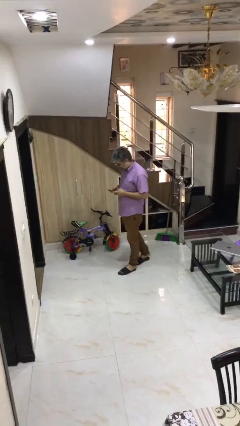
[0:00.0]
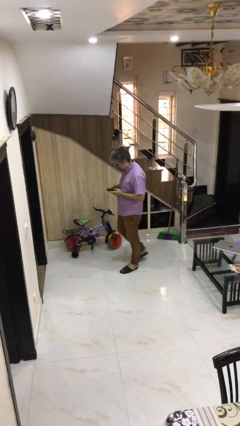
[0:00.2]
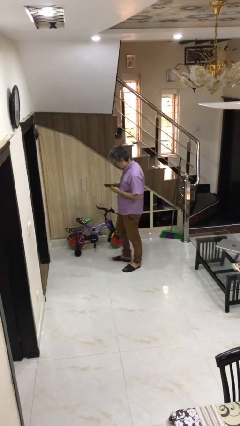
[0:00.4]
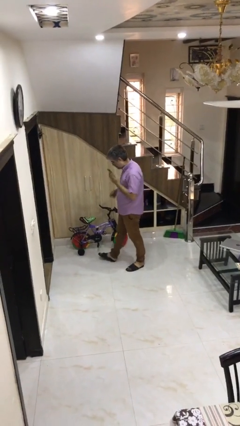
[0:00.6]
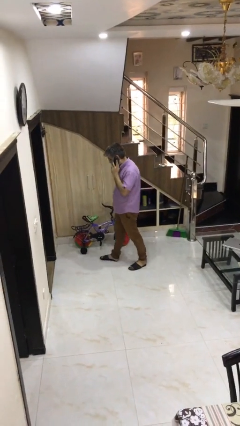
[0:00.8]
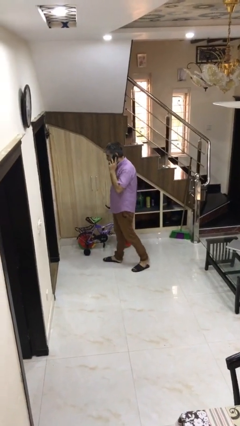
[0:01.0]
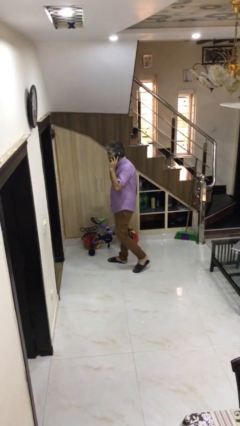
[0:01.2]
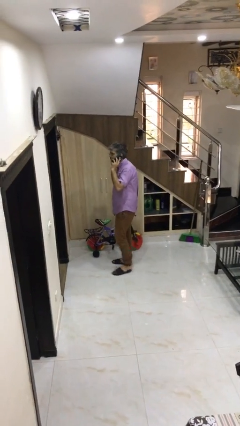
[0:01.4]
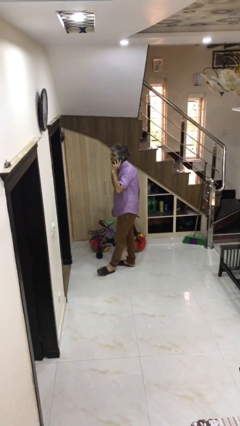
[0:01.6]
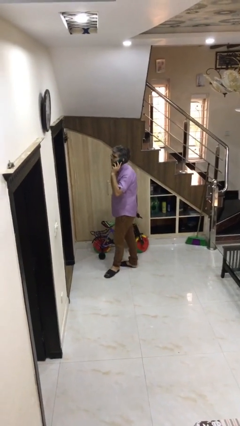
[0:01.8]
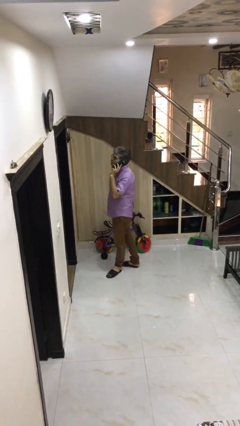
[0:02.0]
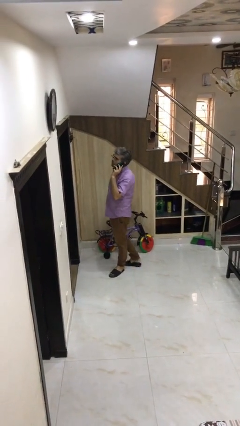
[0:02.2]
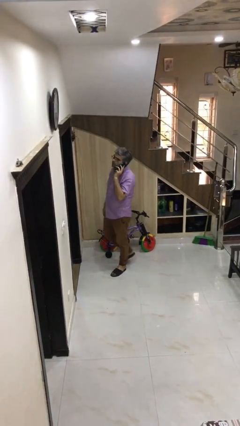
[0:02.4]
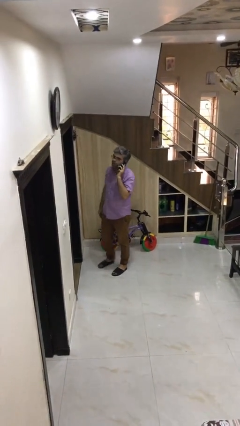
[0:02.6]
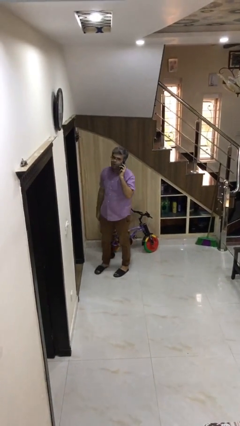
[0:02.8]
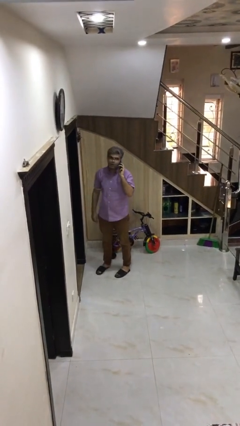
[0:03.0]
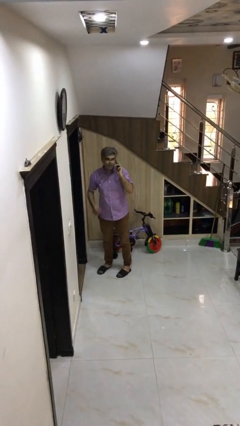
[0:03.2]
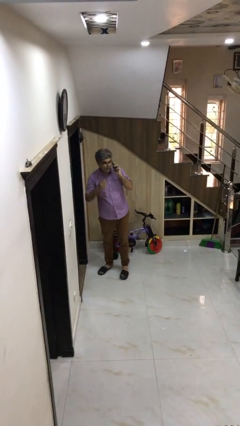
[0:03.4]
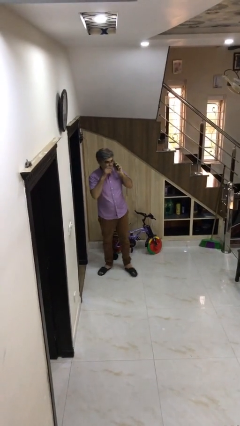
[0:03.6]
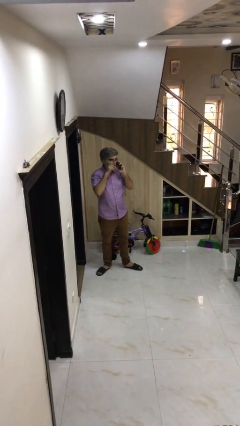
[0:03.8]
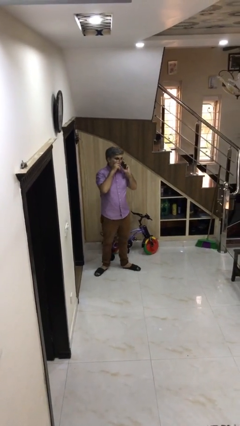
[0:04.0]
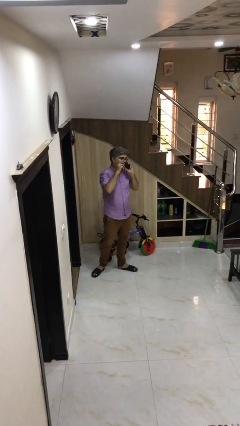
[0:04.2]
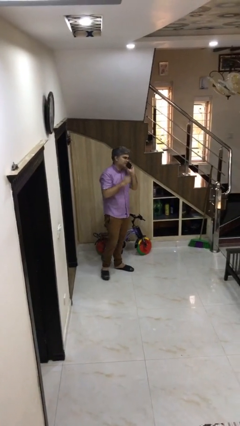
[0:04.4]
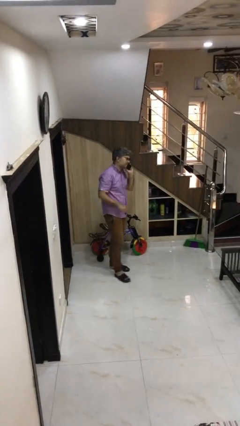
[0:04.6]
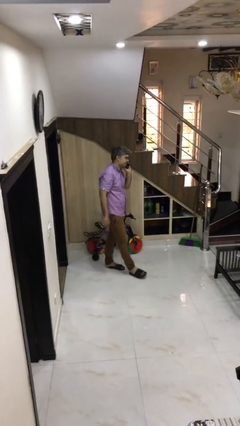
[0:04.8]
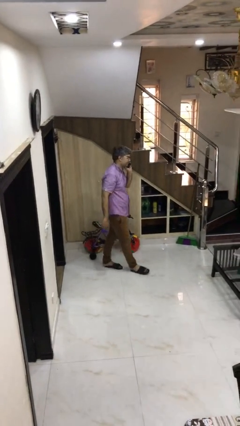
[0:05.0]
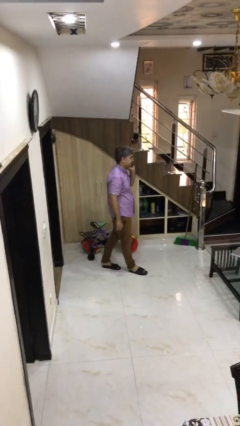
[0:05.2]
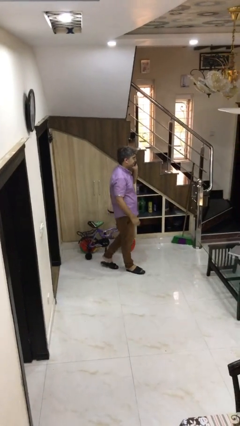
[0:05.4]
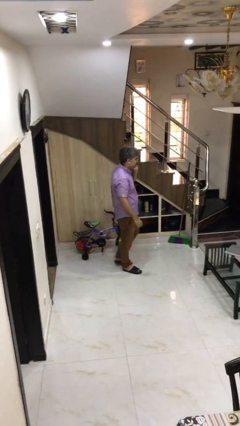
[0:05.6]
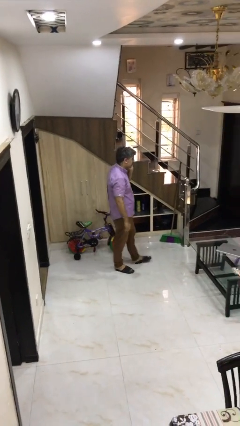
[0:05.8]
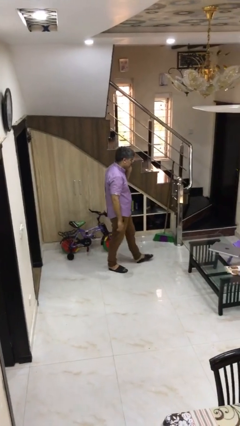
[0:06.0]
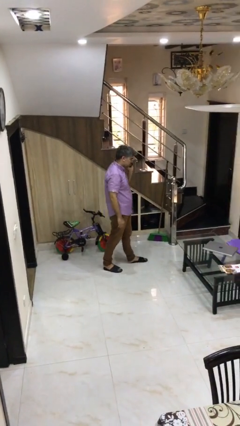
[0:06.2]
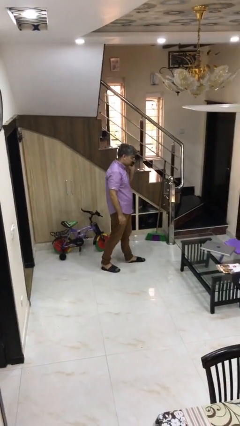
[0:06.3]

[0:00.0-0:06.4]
person talks on phone

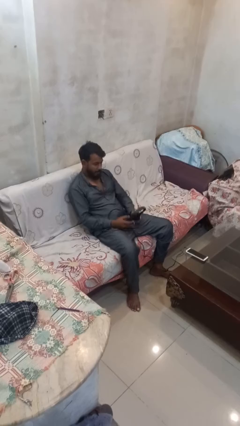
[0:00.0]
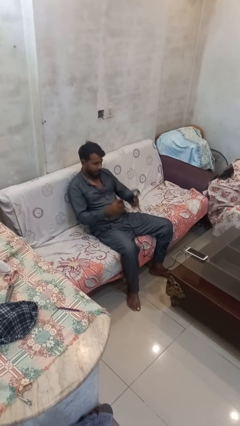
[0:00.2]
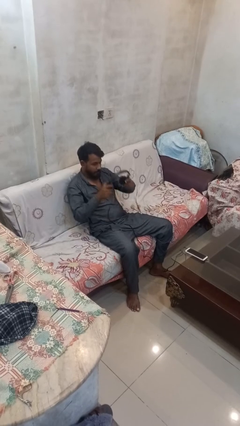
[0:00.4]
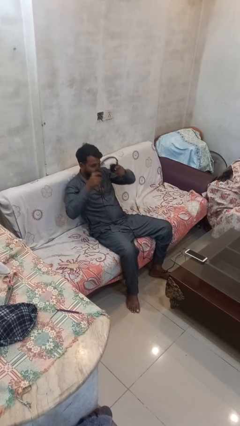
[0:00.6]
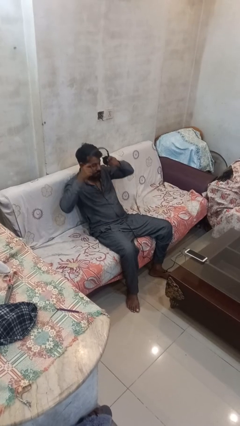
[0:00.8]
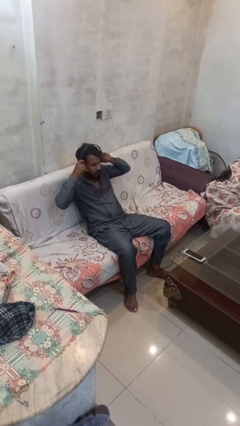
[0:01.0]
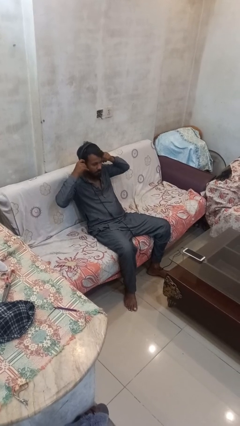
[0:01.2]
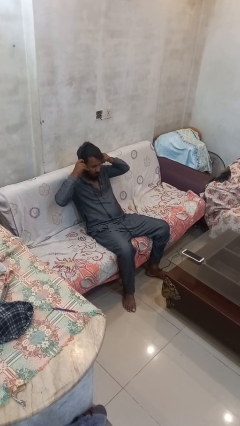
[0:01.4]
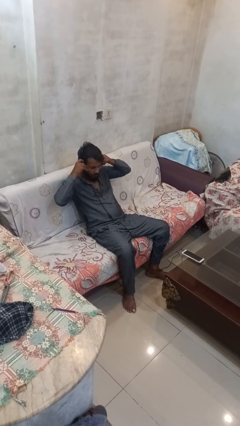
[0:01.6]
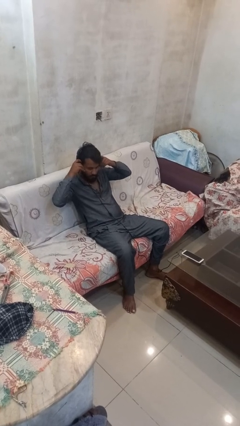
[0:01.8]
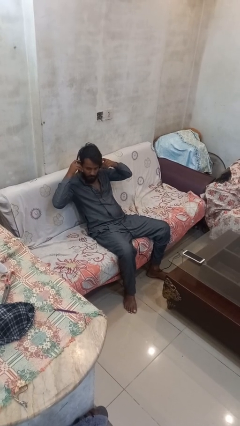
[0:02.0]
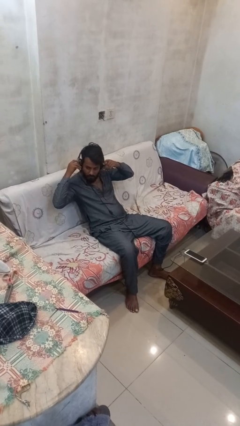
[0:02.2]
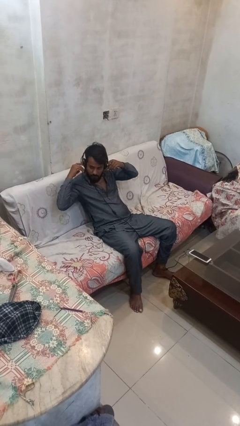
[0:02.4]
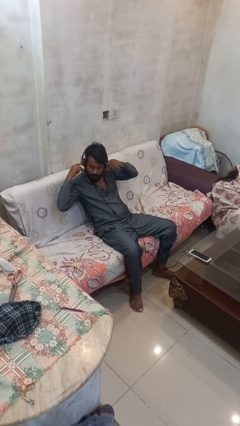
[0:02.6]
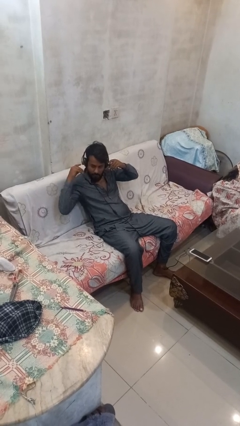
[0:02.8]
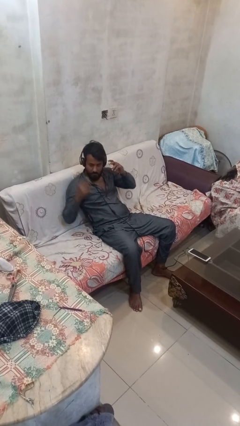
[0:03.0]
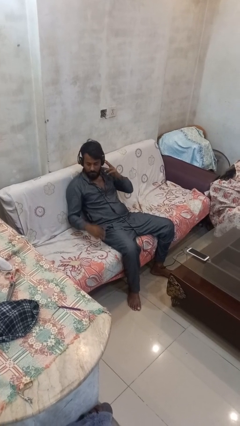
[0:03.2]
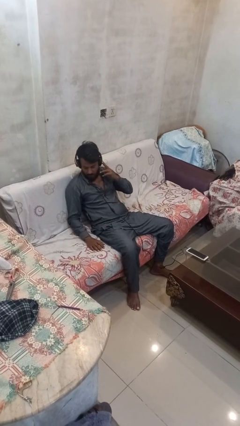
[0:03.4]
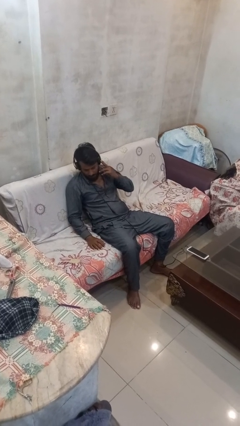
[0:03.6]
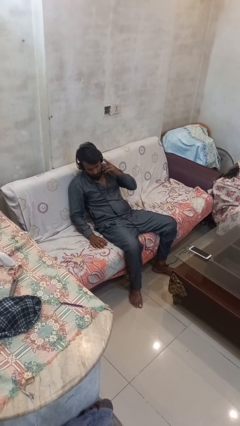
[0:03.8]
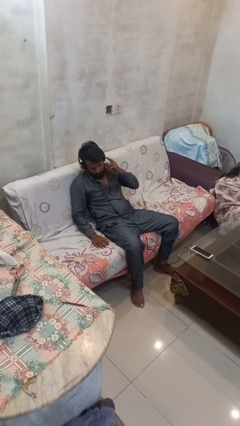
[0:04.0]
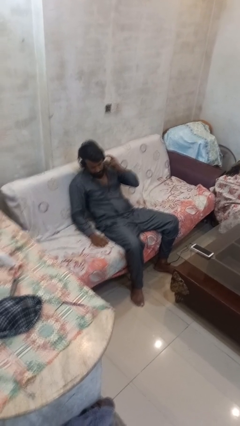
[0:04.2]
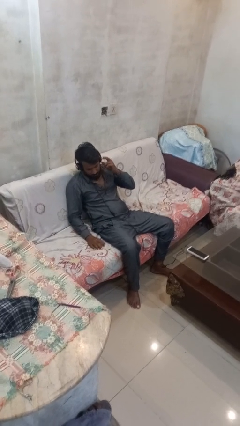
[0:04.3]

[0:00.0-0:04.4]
person puts on headphones

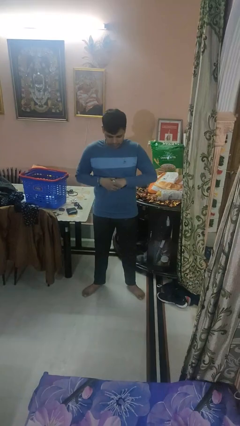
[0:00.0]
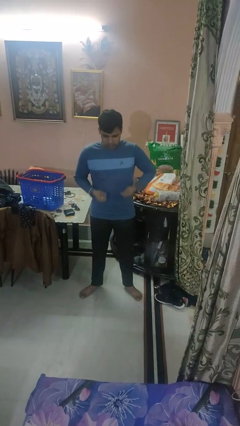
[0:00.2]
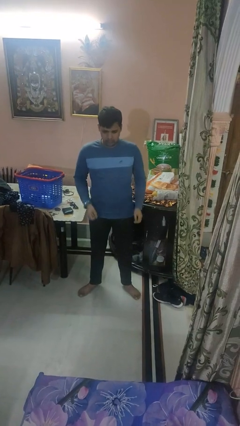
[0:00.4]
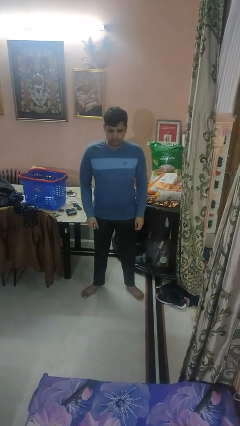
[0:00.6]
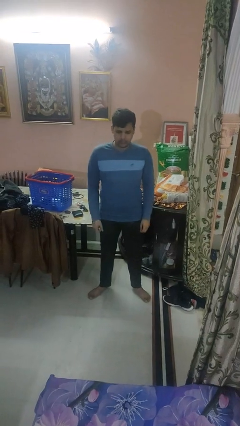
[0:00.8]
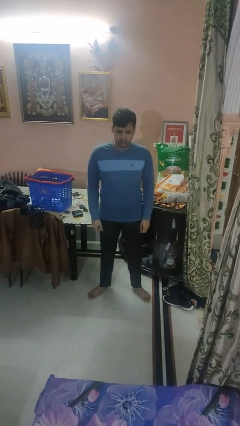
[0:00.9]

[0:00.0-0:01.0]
person takes off wristwatch

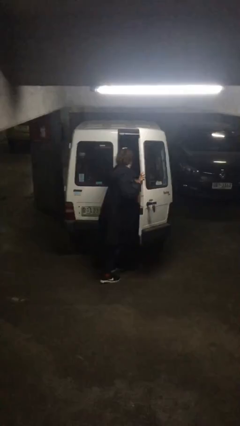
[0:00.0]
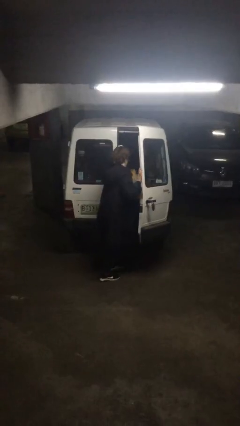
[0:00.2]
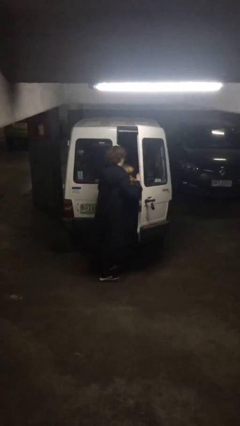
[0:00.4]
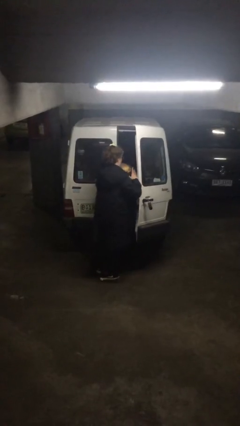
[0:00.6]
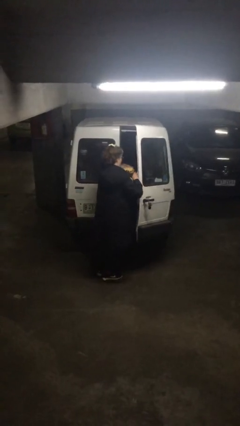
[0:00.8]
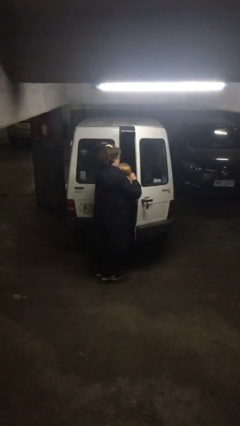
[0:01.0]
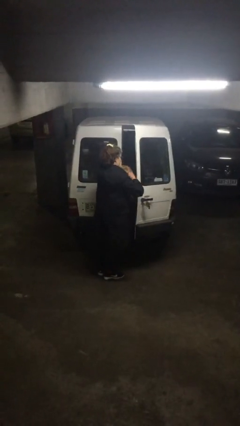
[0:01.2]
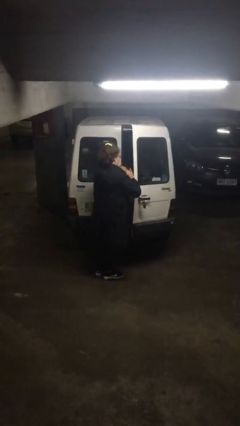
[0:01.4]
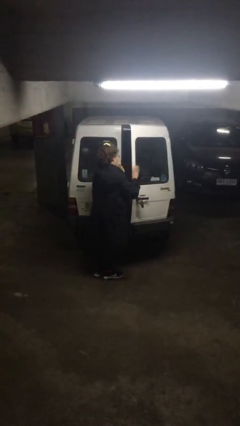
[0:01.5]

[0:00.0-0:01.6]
person unloads car

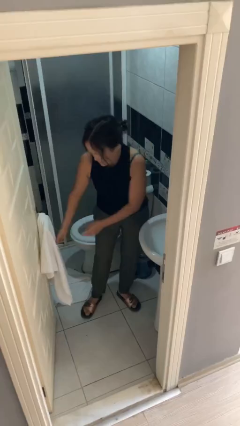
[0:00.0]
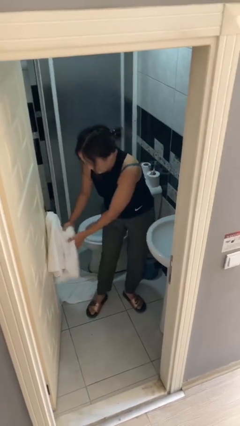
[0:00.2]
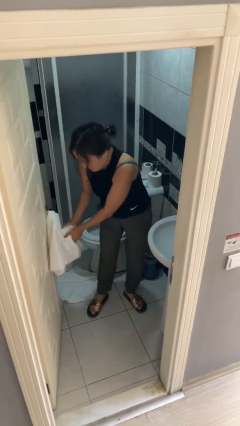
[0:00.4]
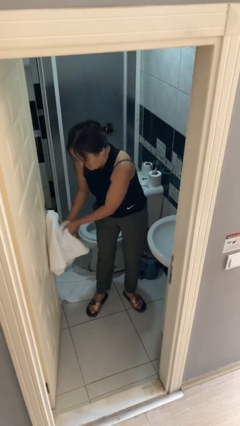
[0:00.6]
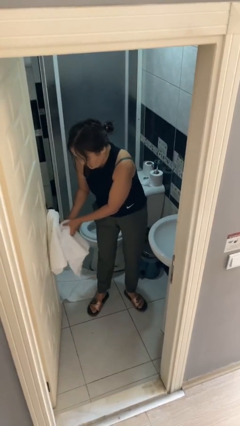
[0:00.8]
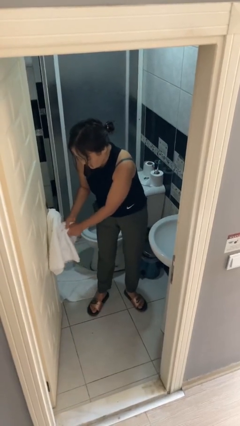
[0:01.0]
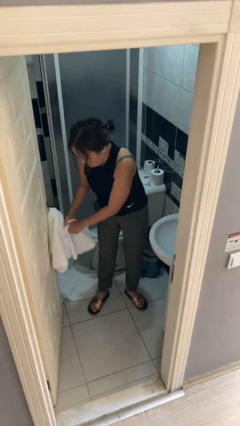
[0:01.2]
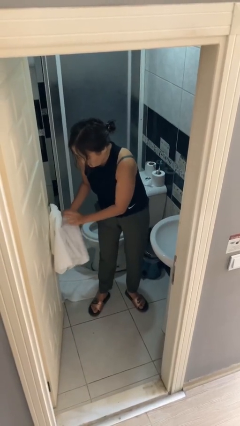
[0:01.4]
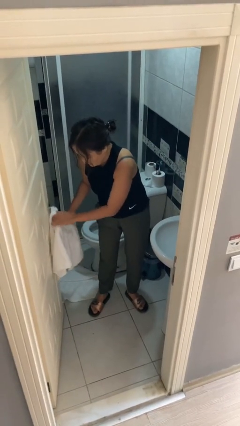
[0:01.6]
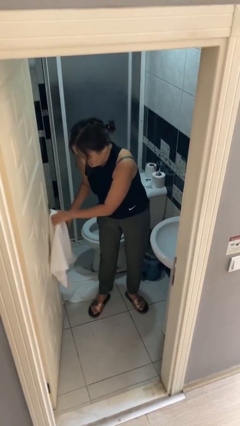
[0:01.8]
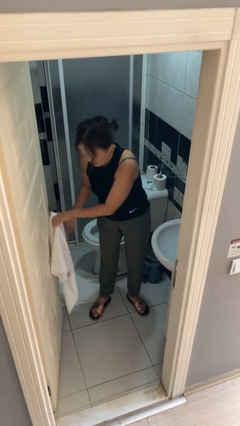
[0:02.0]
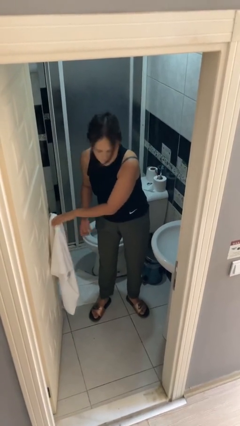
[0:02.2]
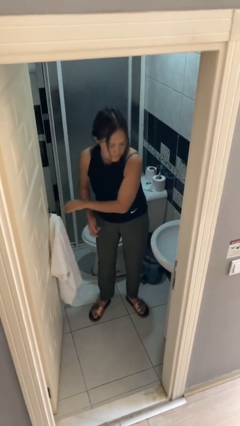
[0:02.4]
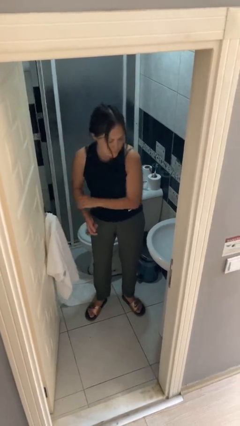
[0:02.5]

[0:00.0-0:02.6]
person dries hands with towel

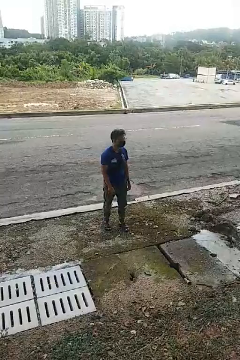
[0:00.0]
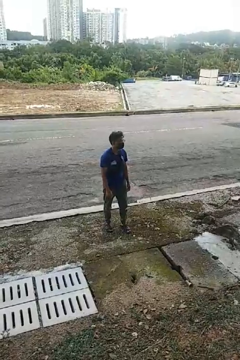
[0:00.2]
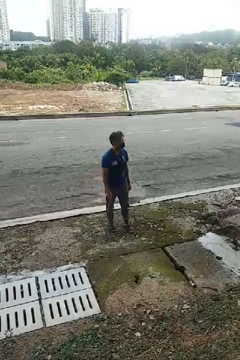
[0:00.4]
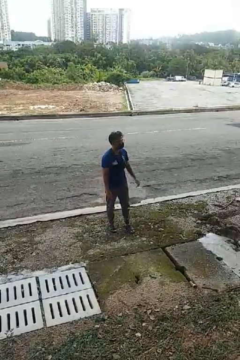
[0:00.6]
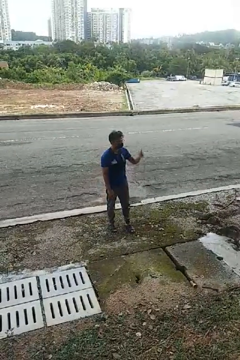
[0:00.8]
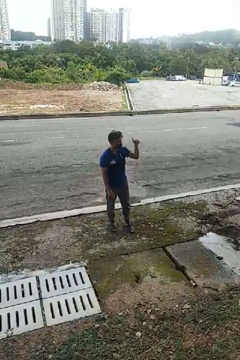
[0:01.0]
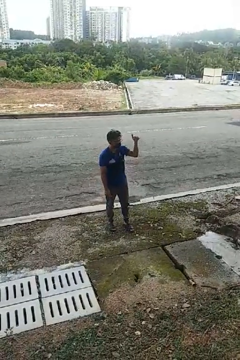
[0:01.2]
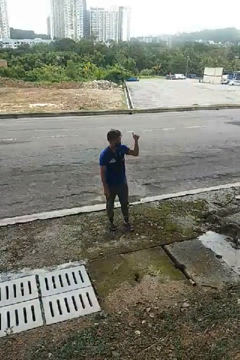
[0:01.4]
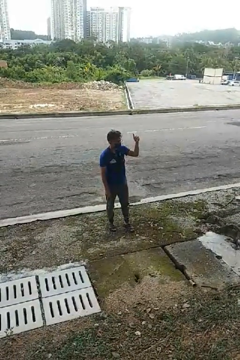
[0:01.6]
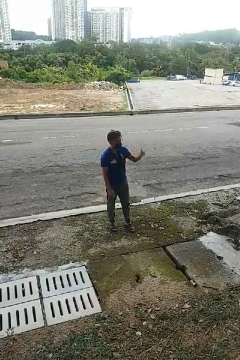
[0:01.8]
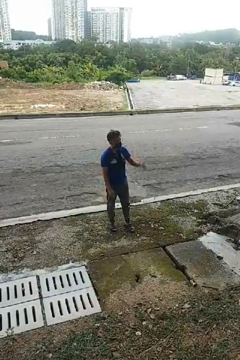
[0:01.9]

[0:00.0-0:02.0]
person gestures hang loose
